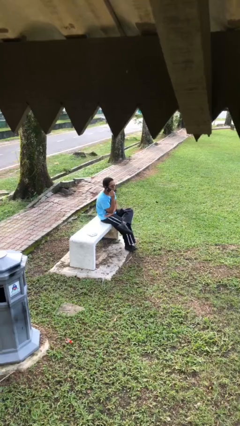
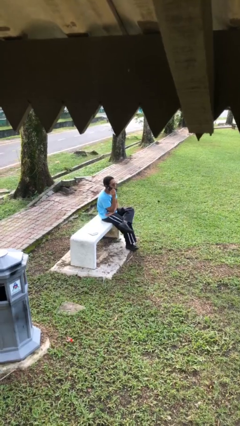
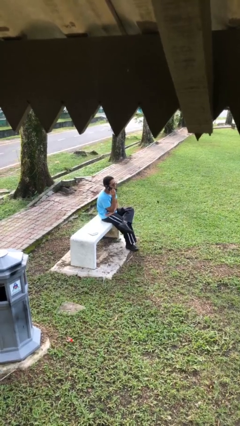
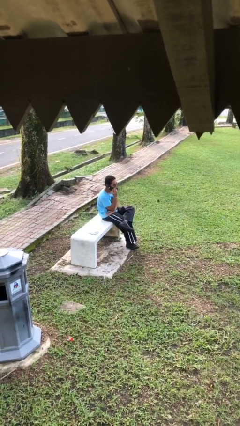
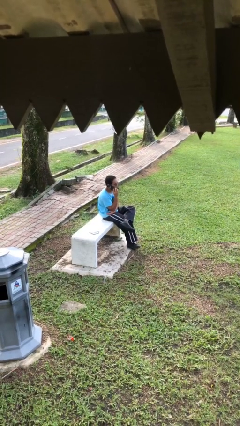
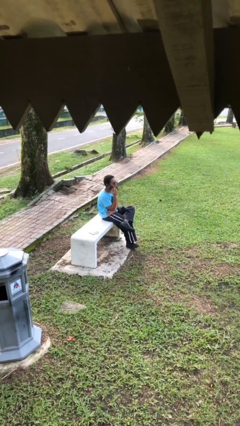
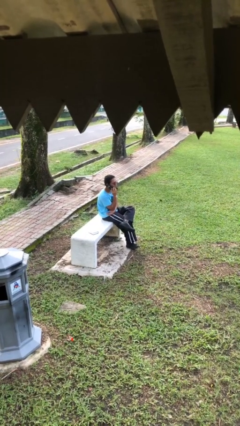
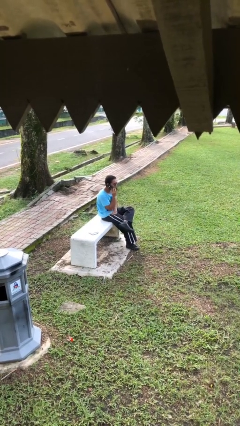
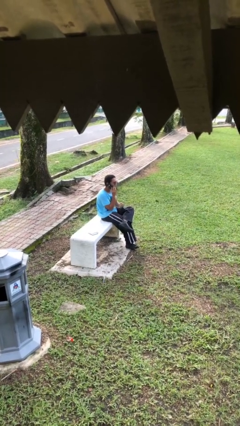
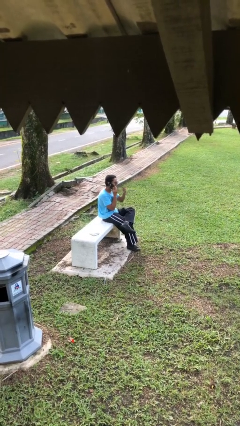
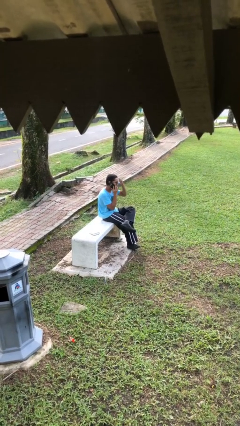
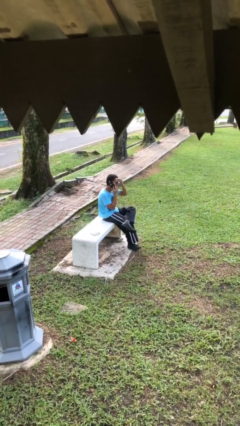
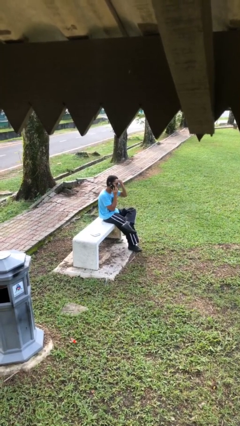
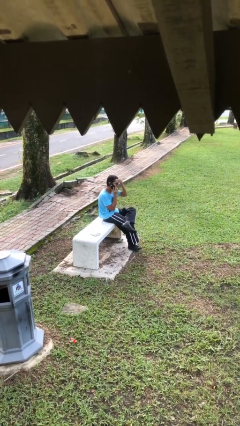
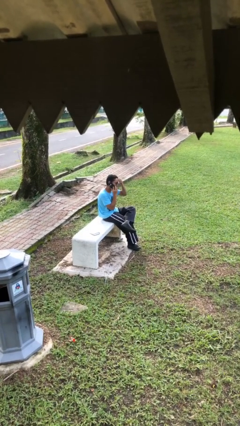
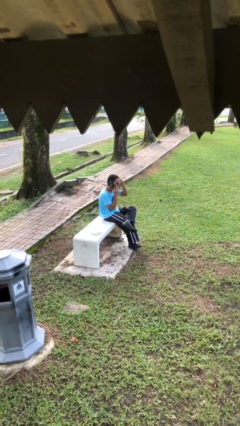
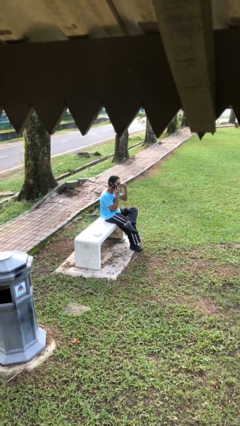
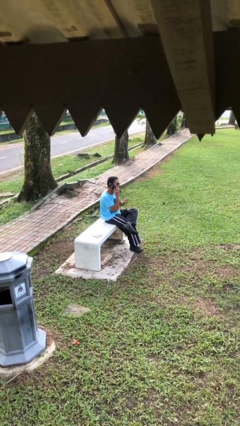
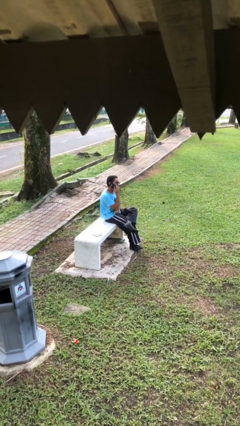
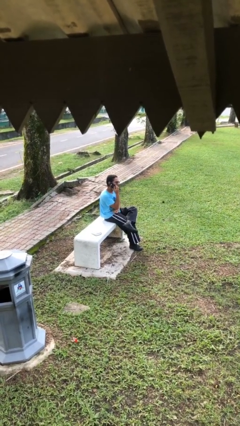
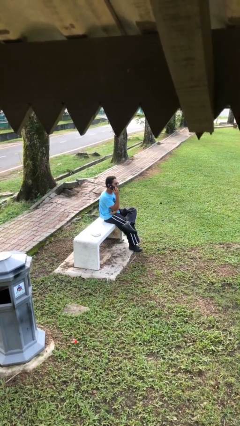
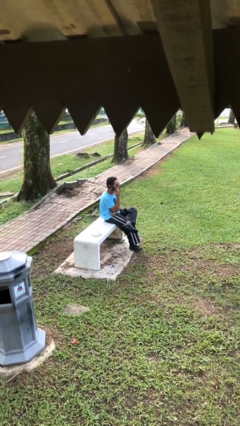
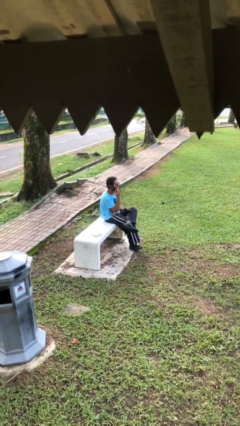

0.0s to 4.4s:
person talks on phone

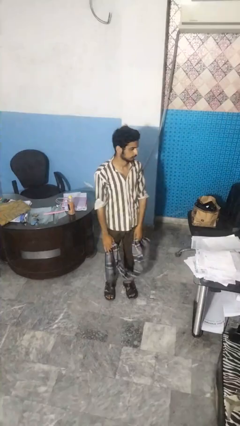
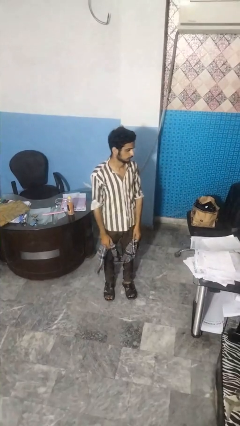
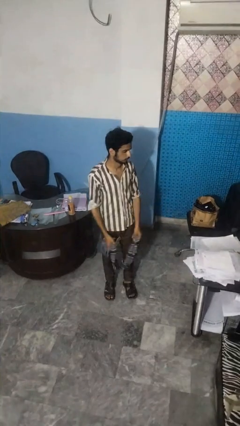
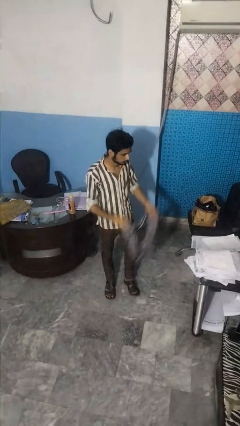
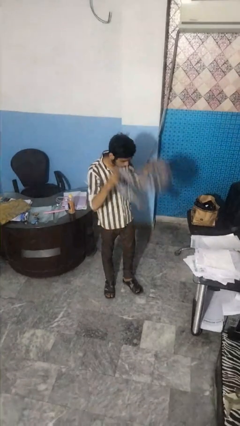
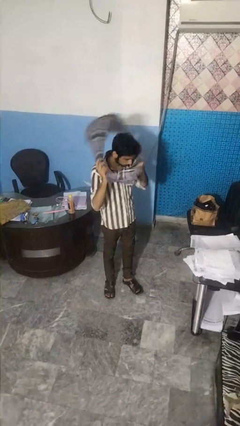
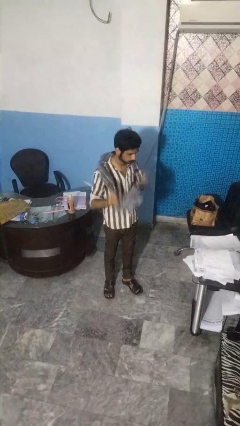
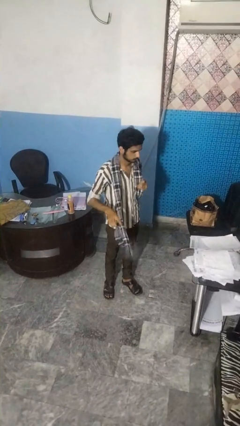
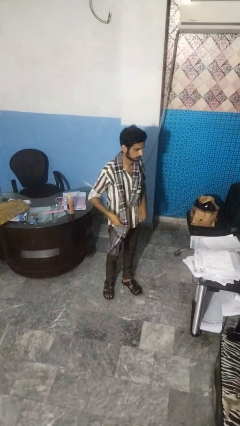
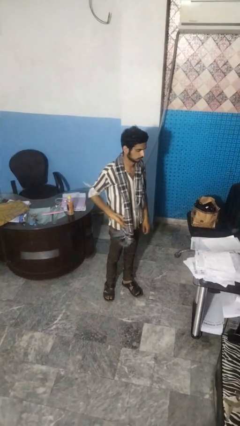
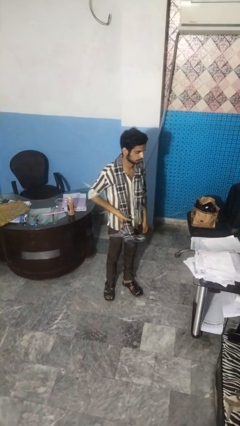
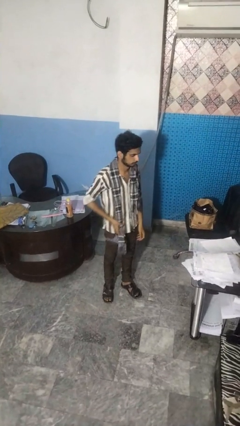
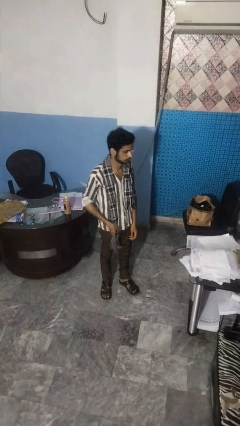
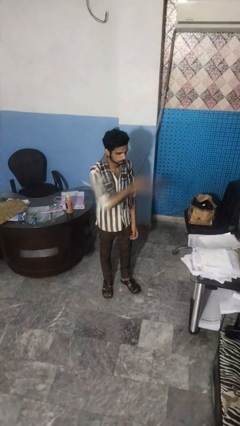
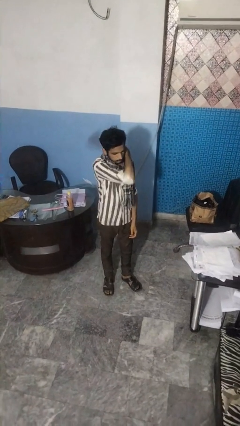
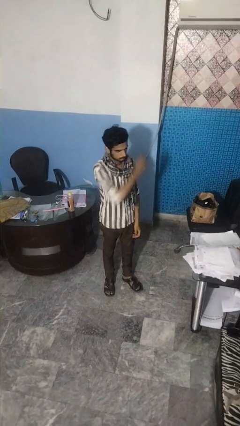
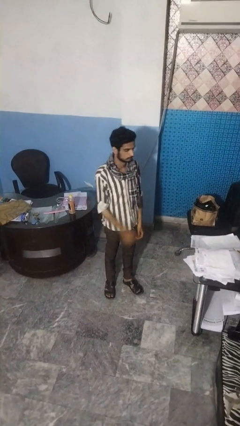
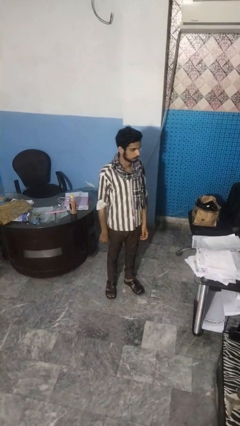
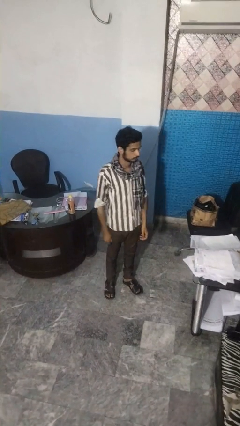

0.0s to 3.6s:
person puts on scarf

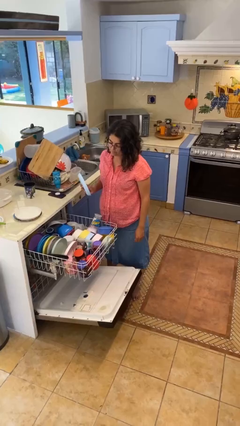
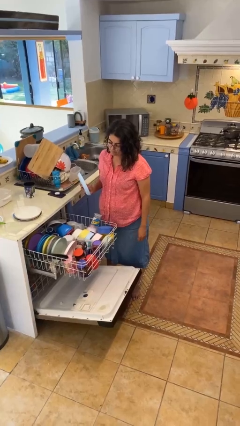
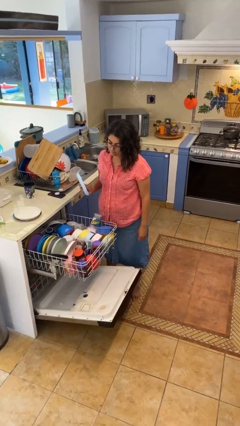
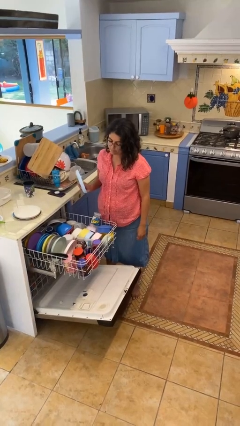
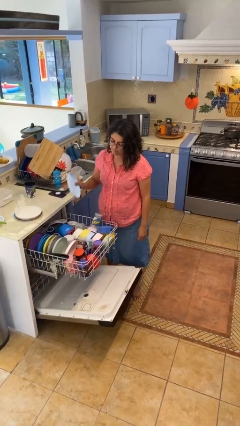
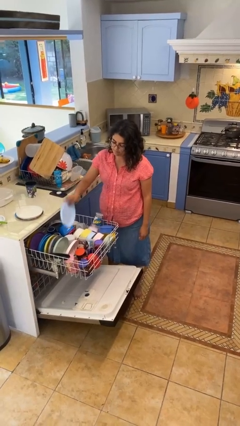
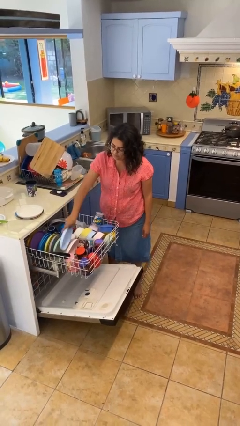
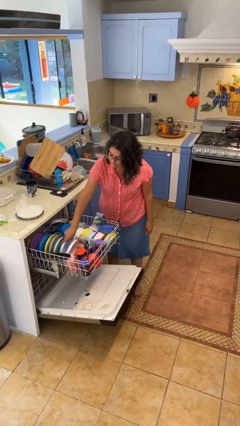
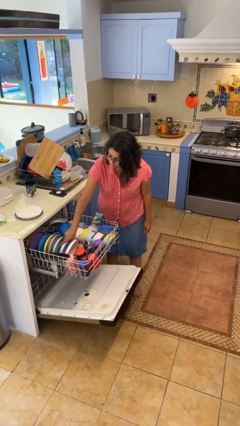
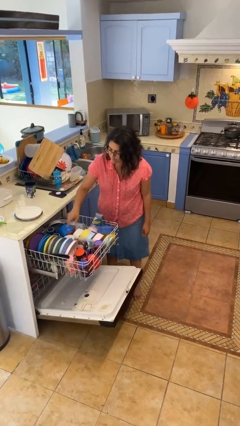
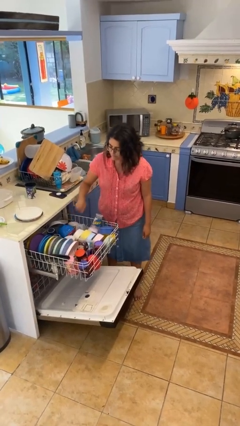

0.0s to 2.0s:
person loads dishwasher

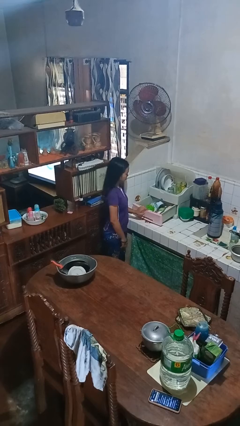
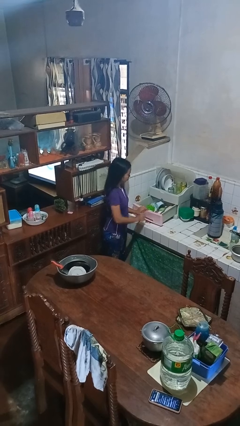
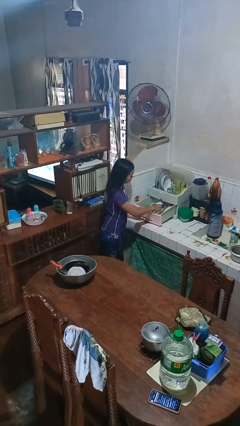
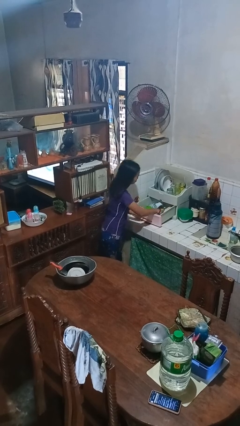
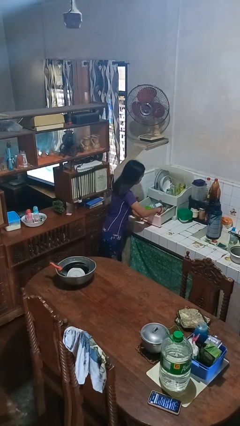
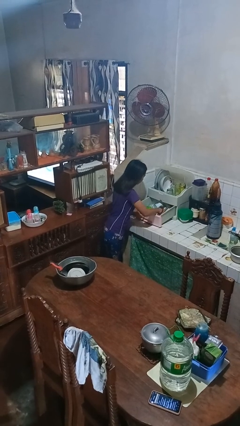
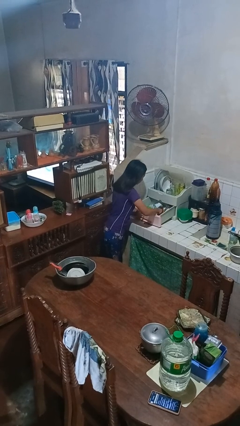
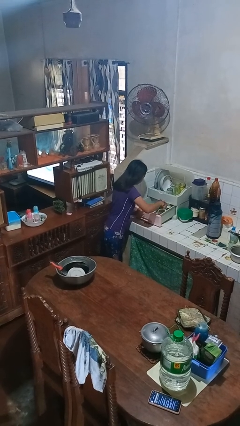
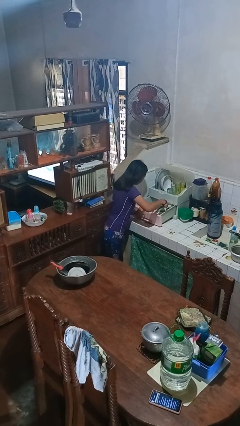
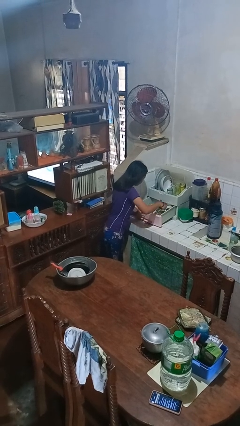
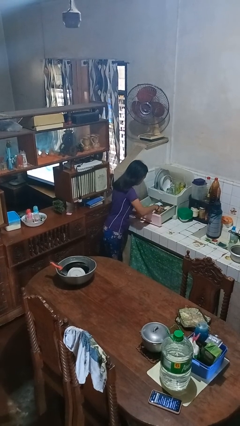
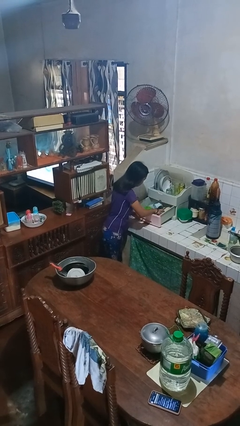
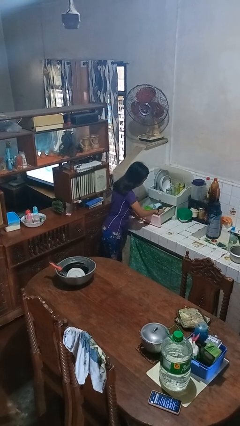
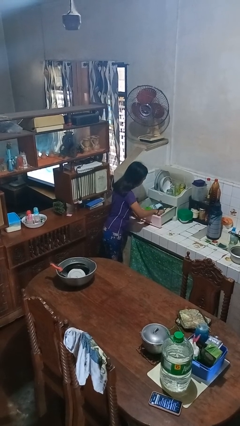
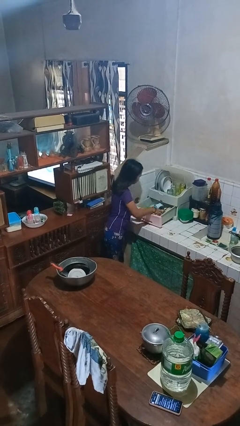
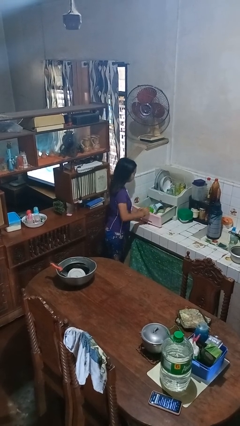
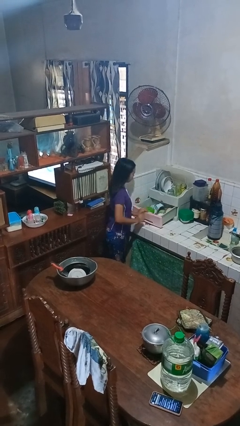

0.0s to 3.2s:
person searches in kitchen drawer

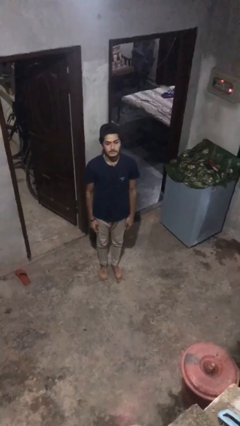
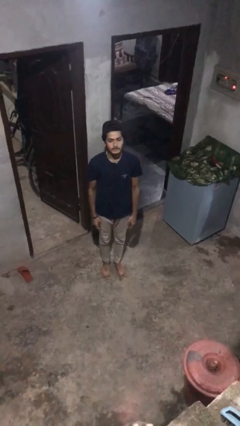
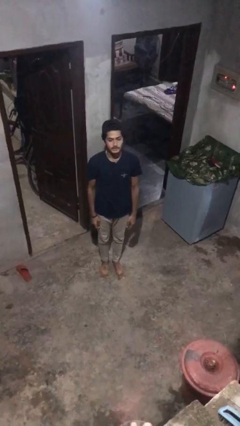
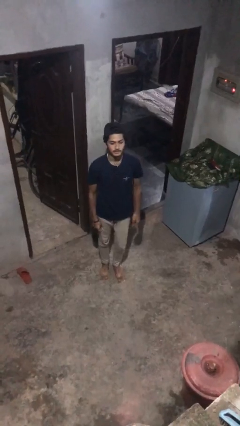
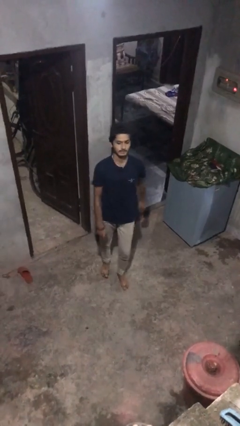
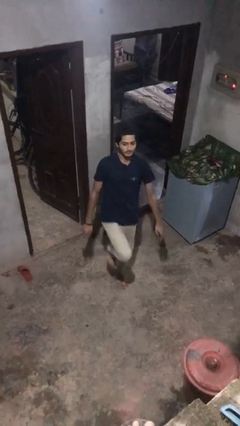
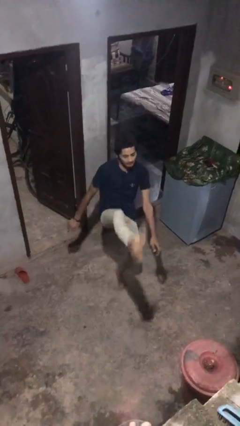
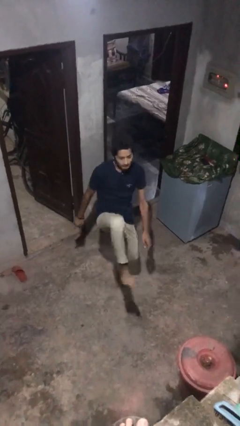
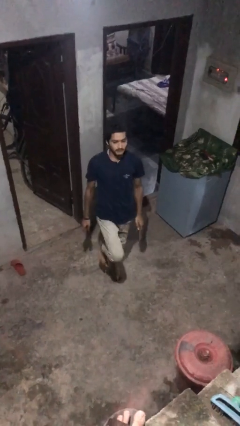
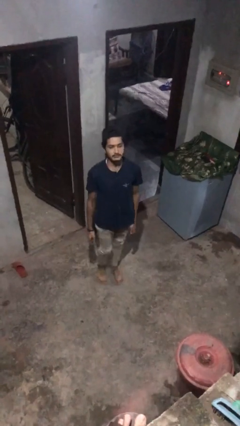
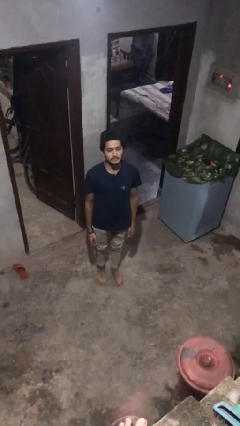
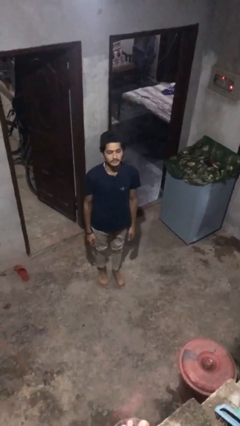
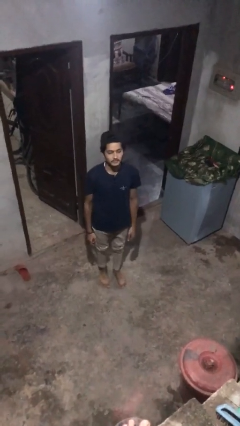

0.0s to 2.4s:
person karate kicks

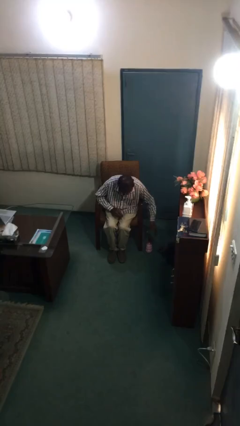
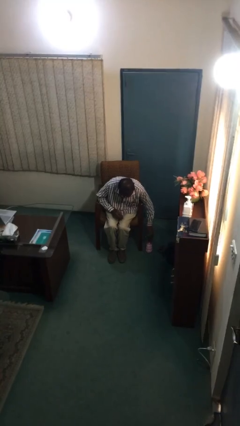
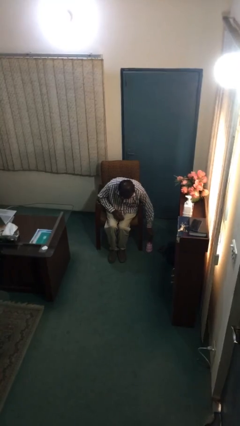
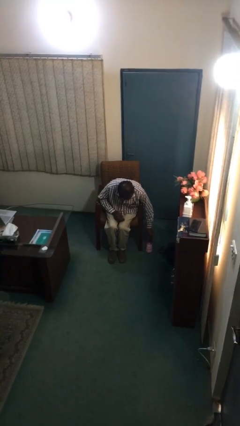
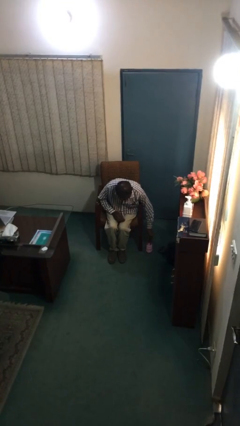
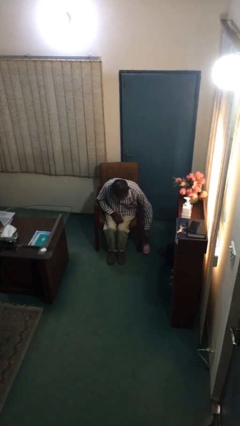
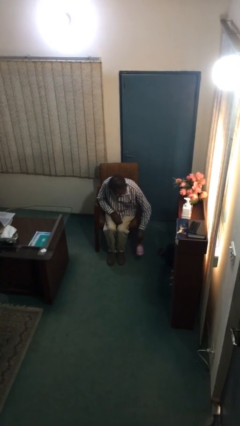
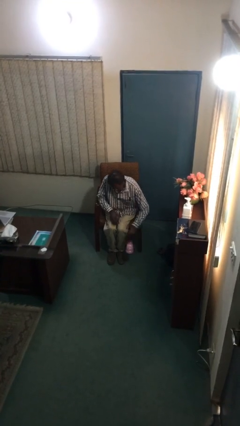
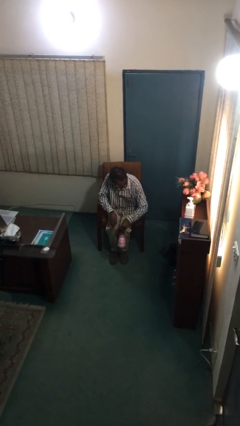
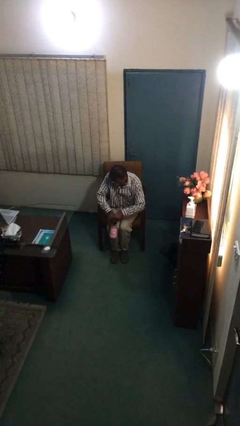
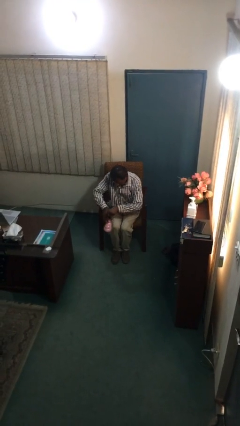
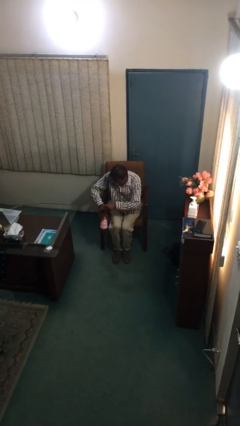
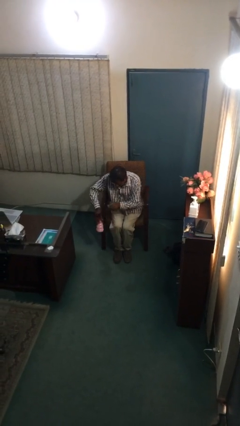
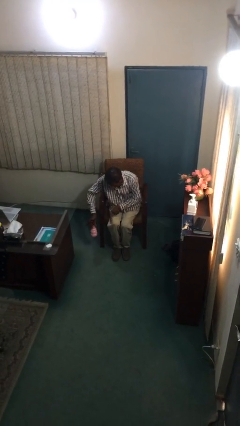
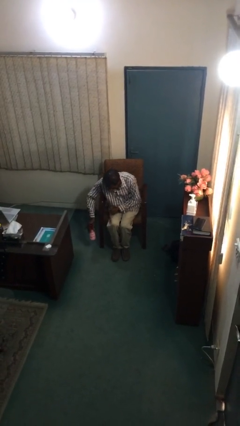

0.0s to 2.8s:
person picks up object from floor
